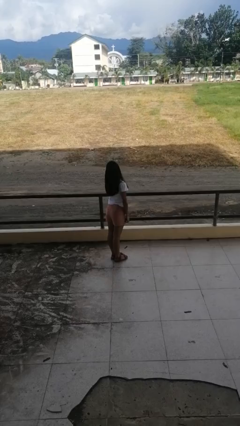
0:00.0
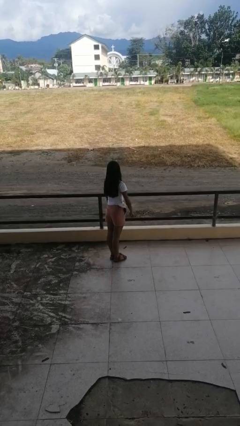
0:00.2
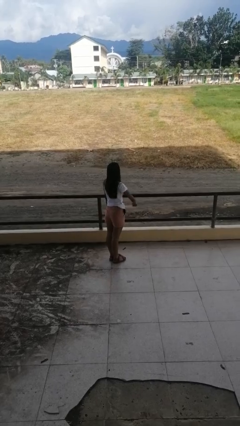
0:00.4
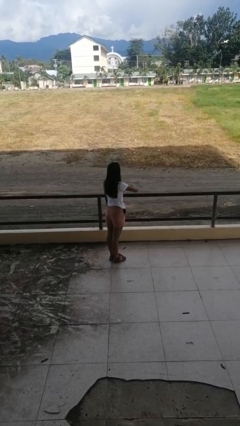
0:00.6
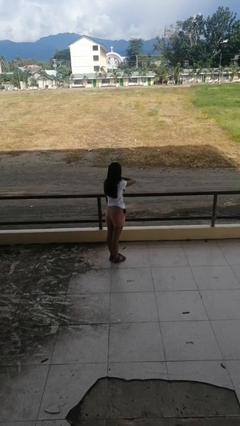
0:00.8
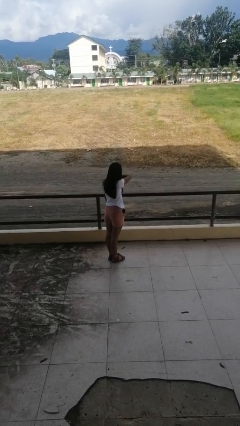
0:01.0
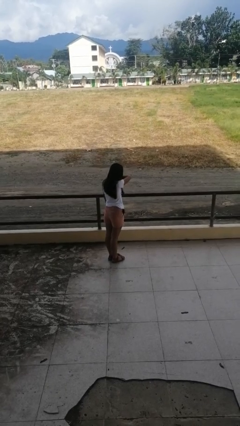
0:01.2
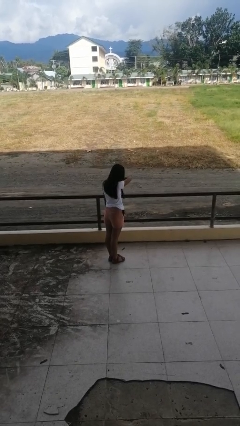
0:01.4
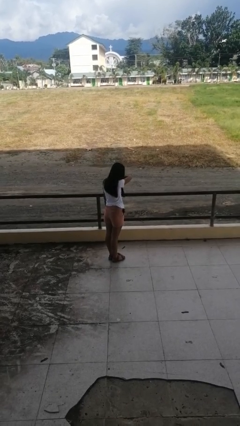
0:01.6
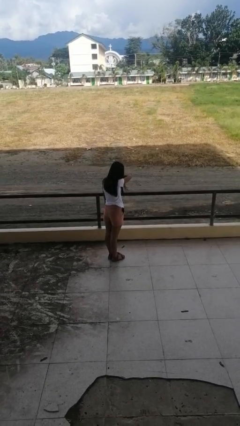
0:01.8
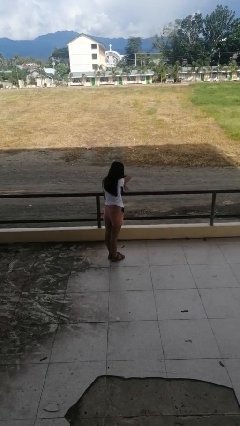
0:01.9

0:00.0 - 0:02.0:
person sneezes into arm

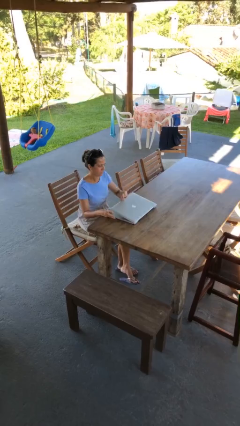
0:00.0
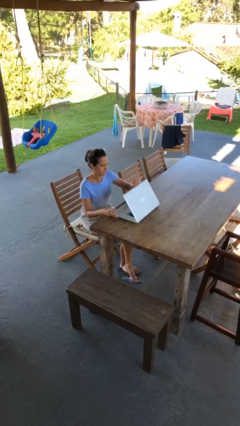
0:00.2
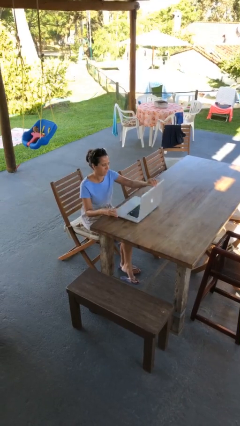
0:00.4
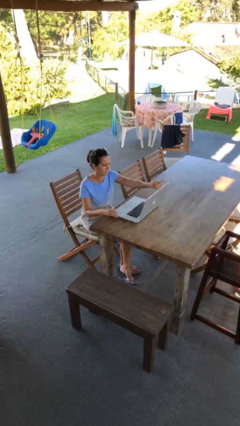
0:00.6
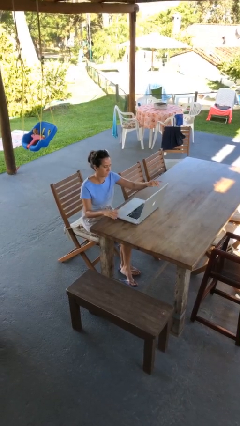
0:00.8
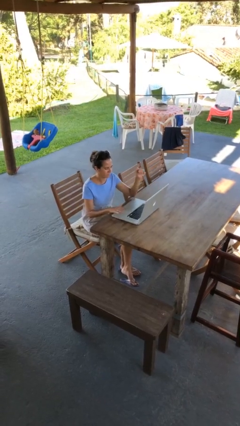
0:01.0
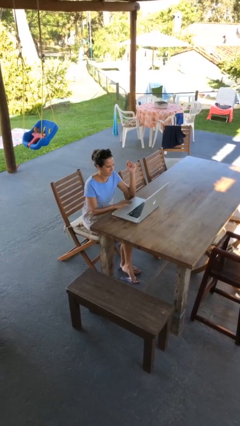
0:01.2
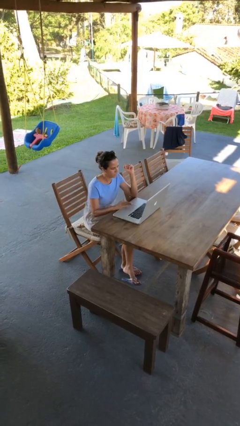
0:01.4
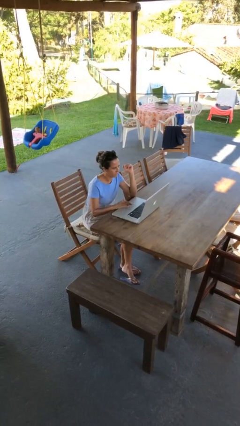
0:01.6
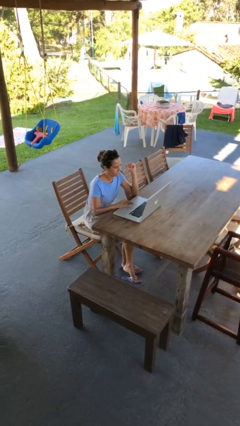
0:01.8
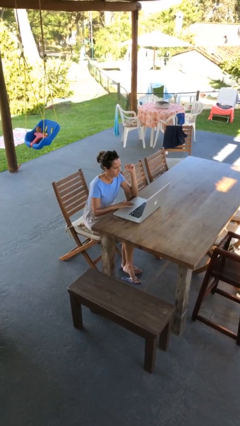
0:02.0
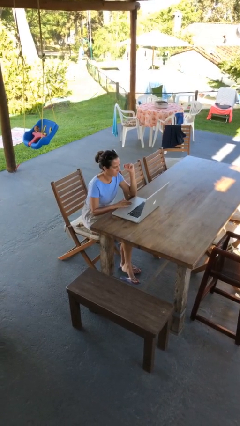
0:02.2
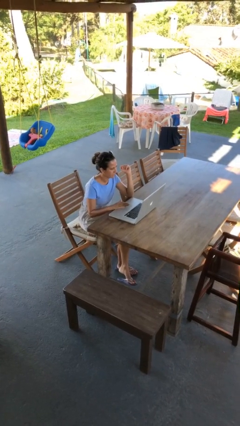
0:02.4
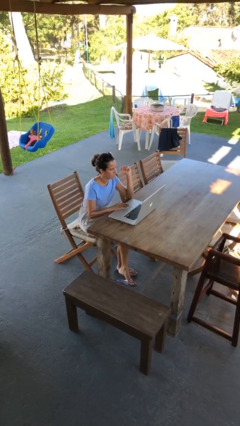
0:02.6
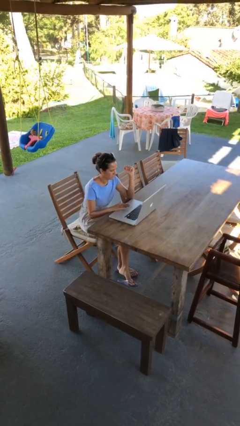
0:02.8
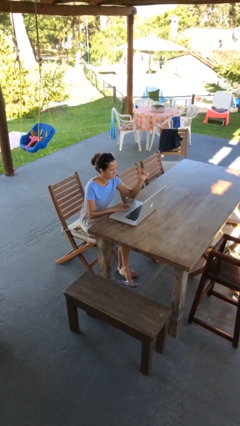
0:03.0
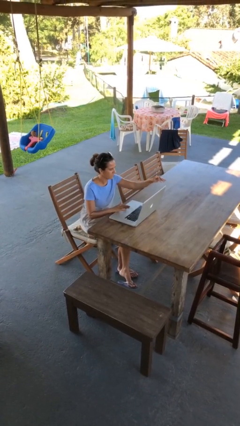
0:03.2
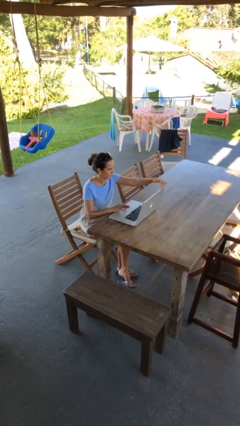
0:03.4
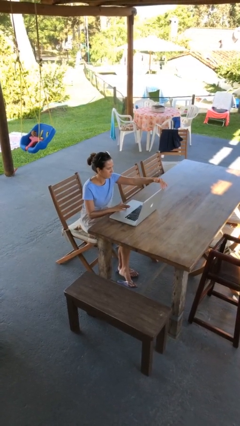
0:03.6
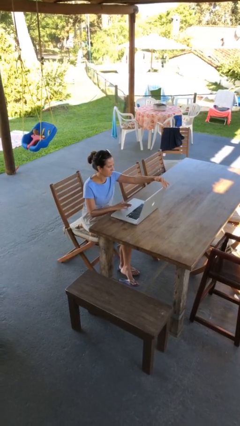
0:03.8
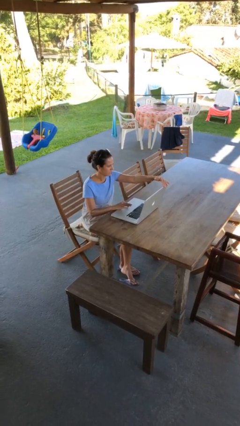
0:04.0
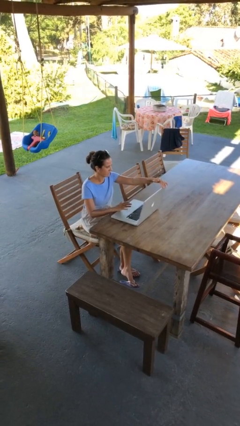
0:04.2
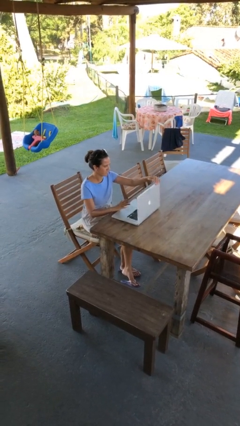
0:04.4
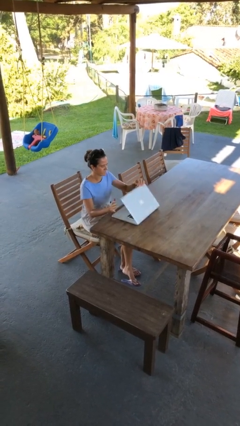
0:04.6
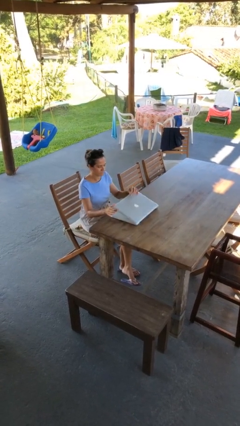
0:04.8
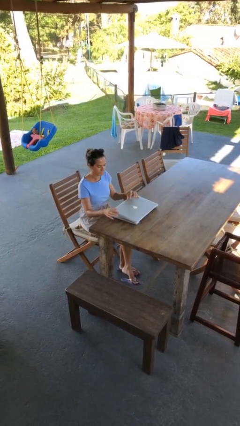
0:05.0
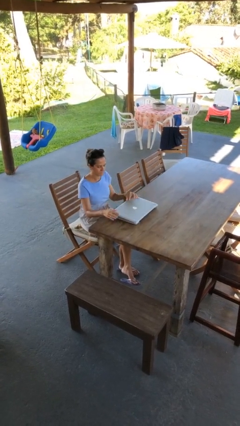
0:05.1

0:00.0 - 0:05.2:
person interacts with laptop

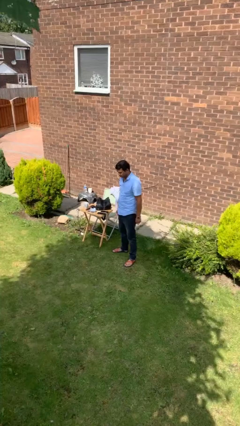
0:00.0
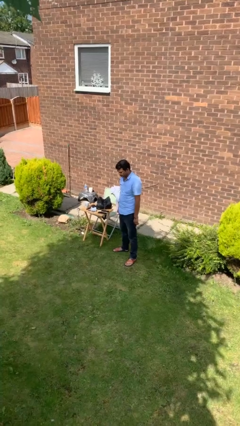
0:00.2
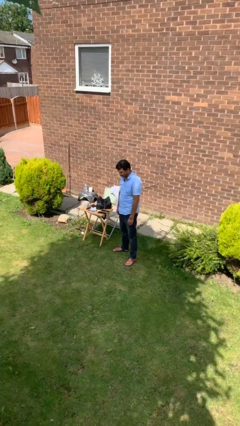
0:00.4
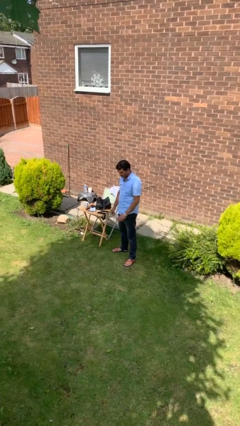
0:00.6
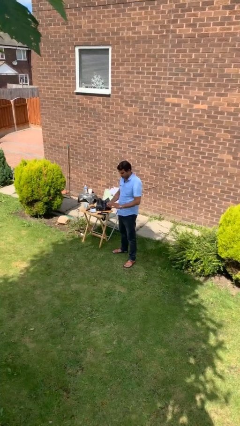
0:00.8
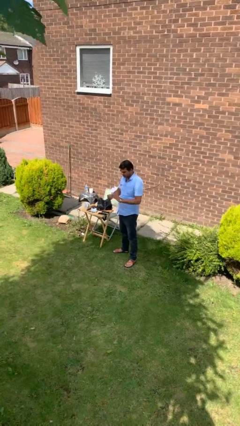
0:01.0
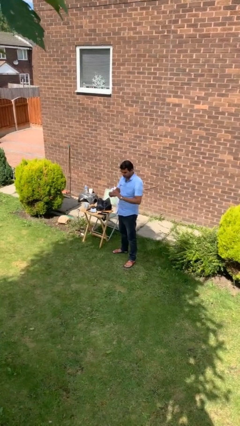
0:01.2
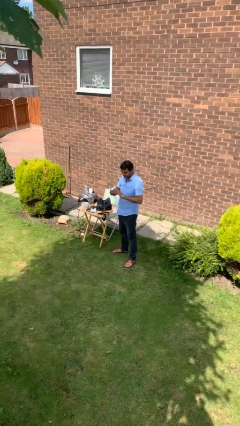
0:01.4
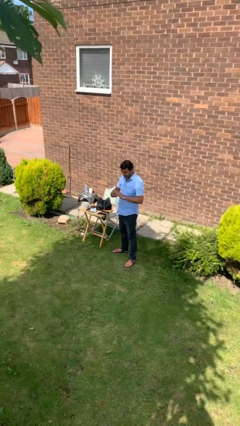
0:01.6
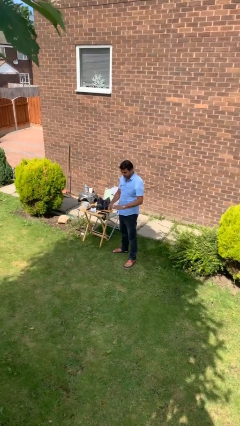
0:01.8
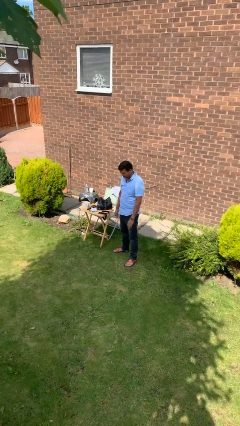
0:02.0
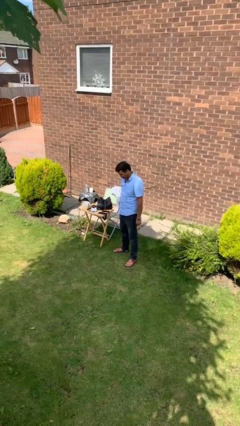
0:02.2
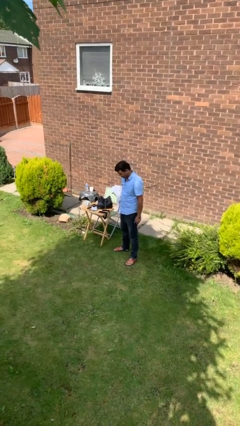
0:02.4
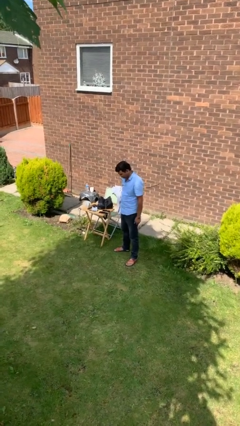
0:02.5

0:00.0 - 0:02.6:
person puts on ring

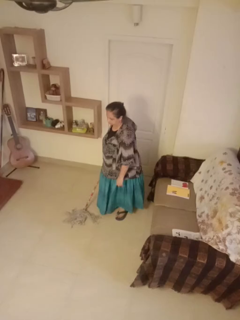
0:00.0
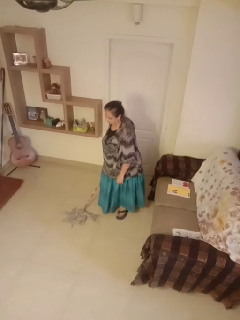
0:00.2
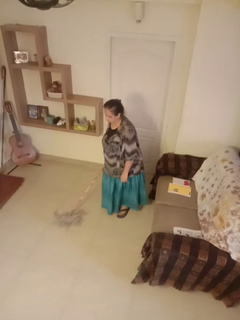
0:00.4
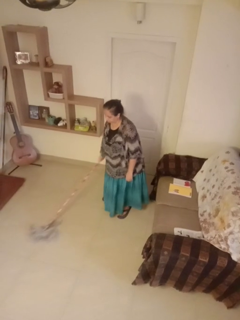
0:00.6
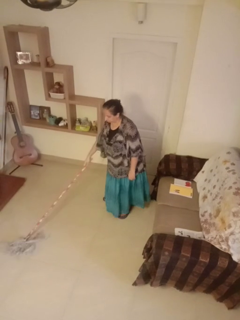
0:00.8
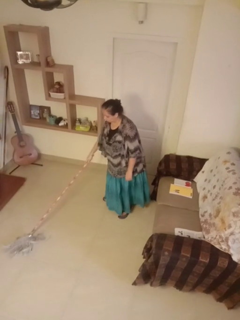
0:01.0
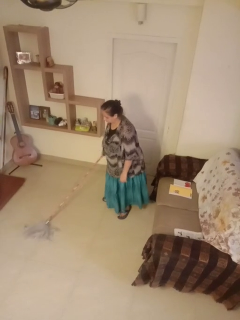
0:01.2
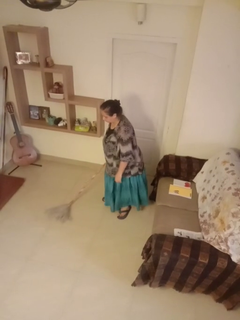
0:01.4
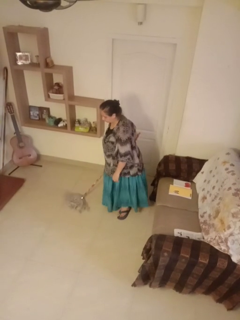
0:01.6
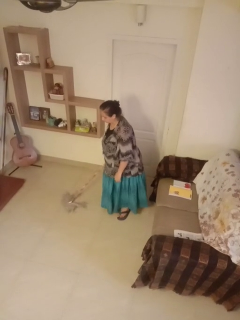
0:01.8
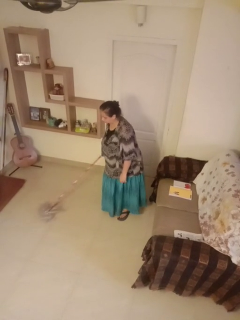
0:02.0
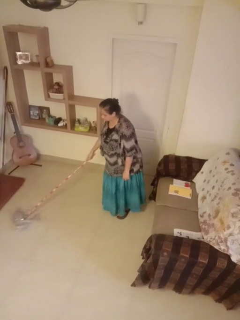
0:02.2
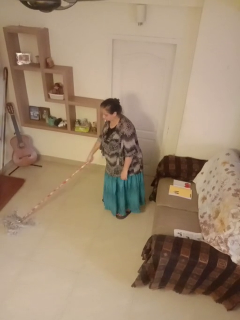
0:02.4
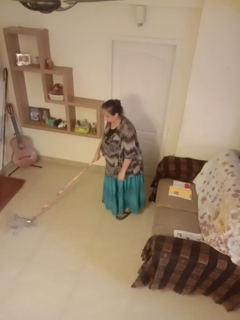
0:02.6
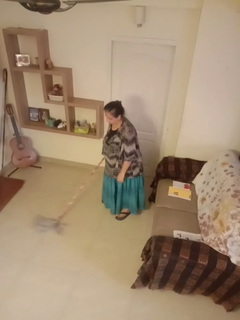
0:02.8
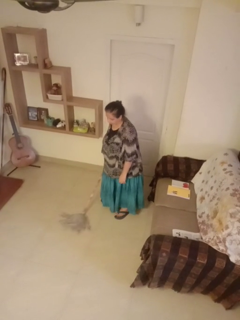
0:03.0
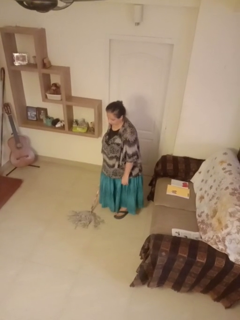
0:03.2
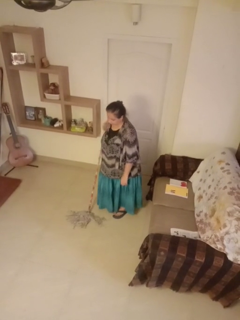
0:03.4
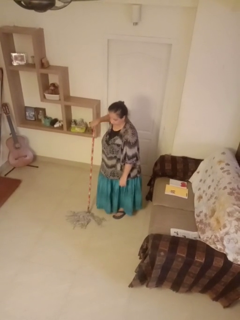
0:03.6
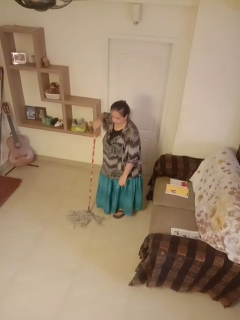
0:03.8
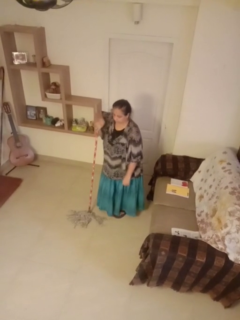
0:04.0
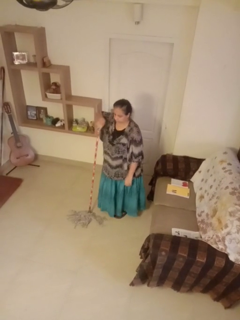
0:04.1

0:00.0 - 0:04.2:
person mops

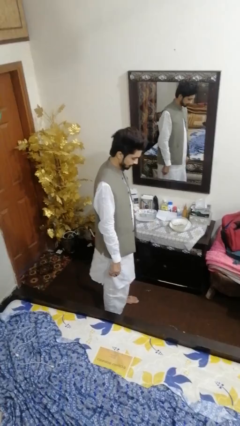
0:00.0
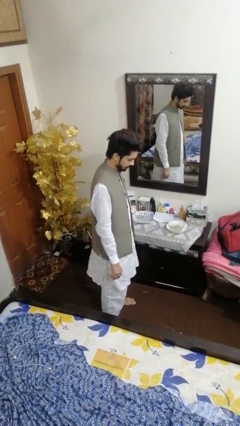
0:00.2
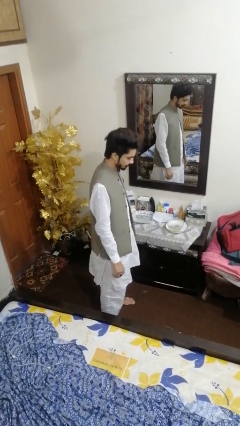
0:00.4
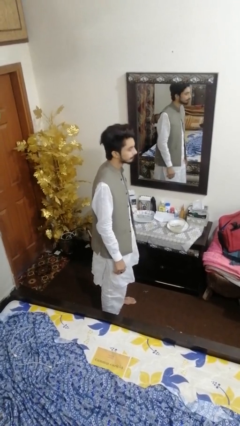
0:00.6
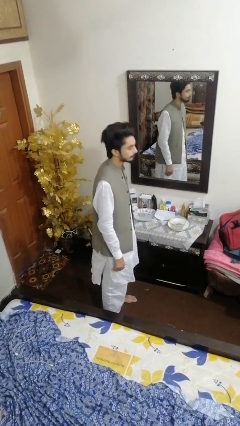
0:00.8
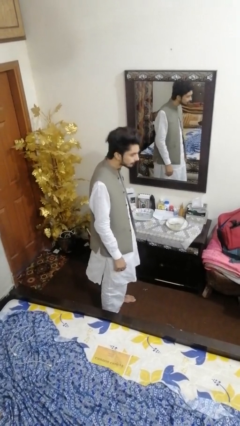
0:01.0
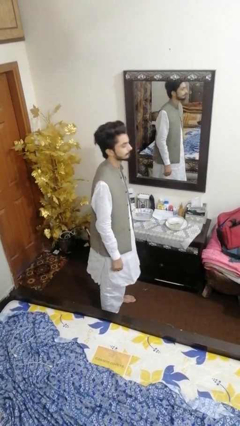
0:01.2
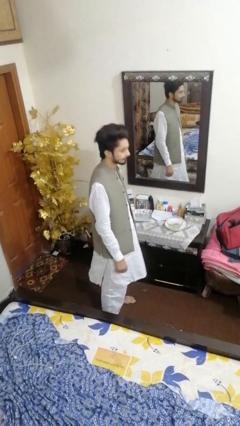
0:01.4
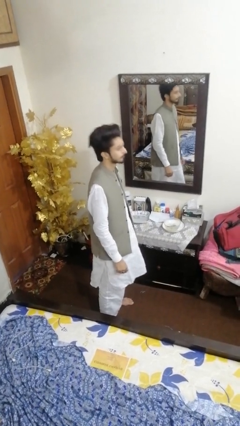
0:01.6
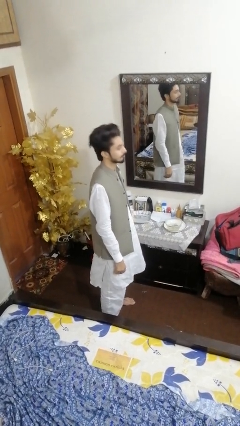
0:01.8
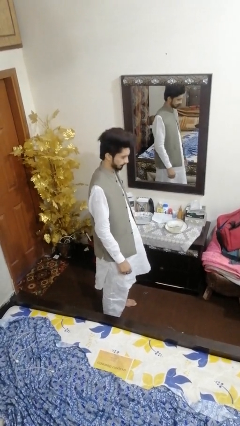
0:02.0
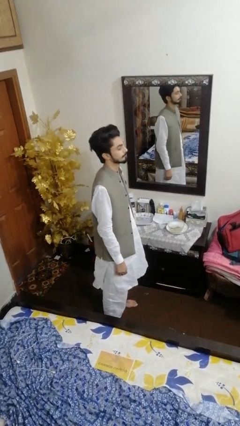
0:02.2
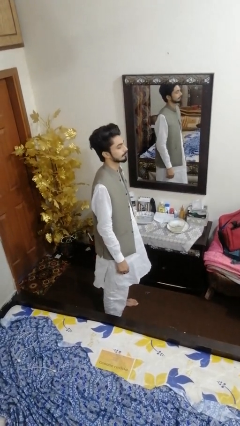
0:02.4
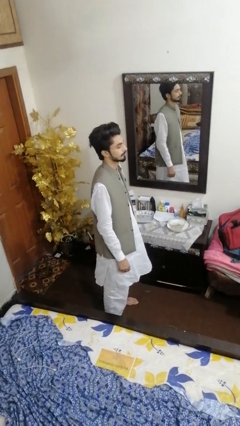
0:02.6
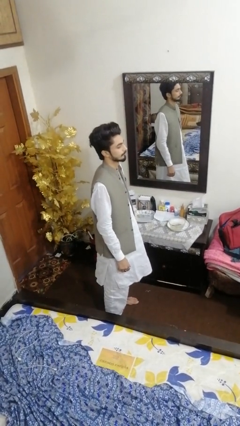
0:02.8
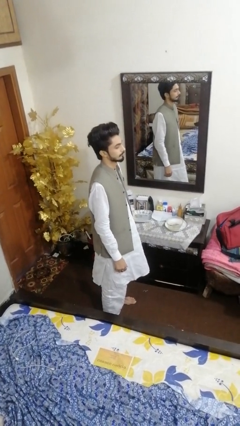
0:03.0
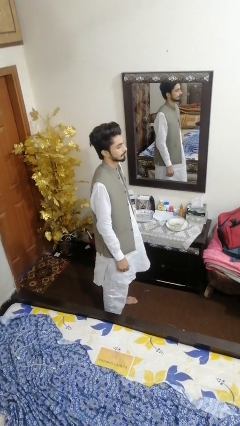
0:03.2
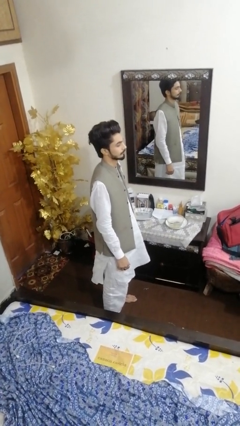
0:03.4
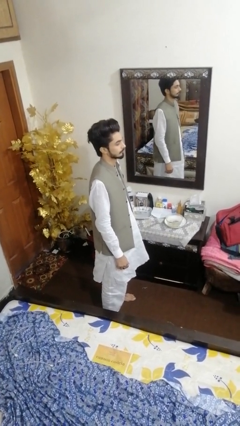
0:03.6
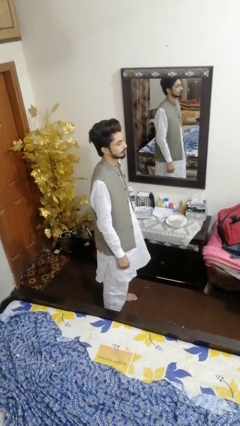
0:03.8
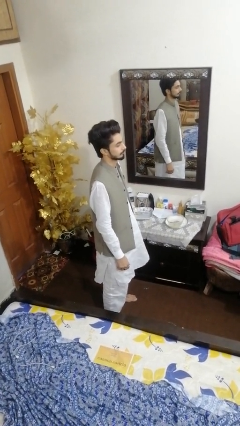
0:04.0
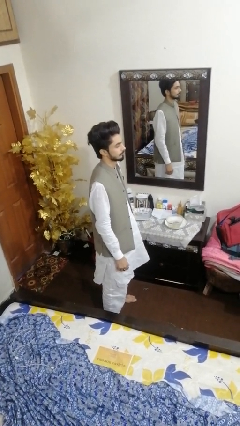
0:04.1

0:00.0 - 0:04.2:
person nods head

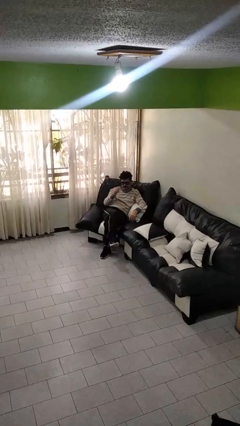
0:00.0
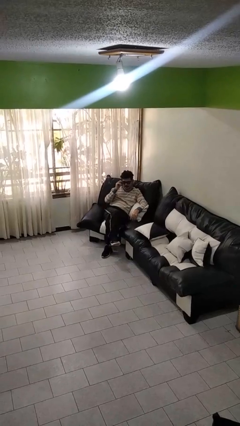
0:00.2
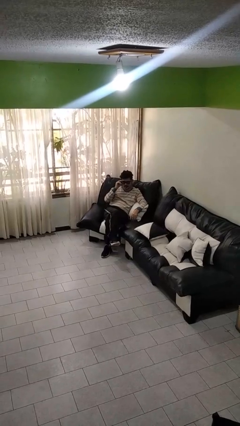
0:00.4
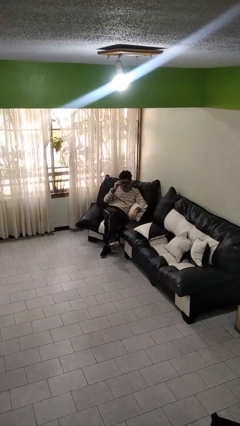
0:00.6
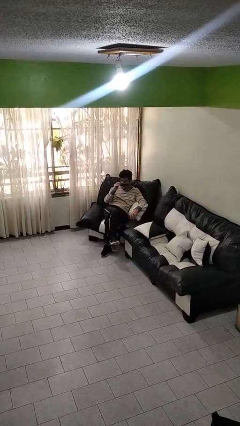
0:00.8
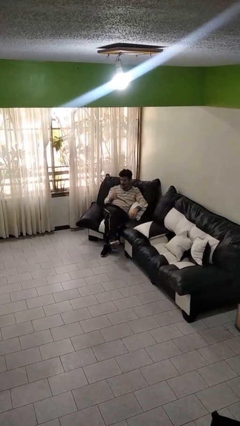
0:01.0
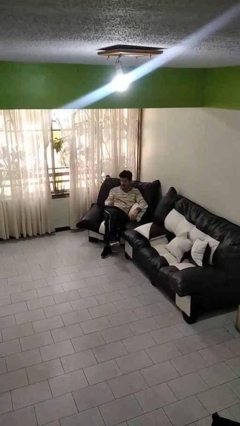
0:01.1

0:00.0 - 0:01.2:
person takes off sunglasses
